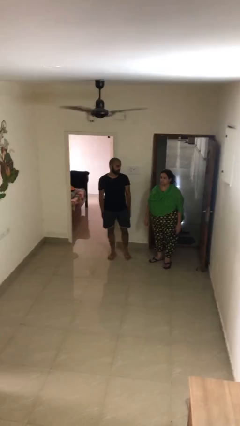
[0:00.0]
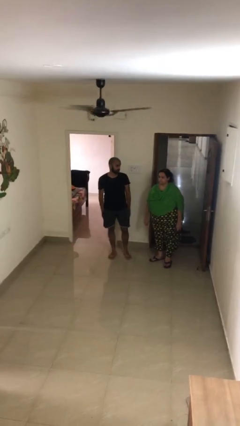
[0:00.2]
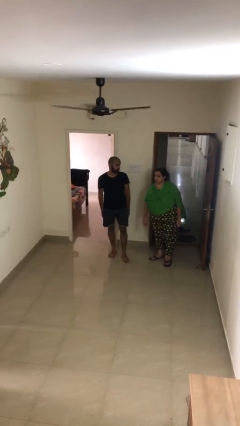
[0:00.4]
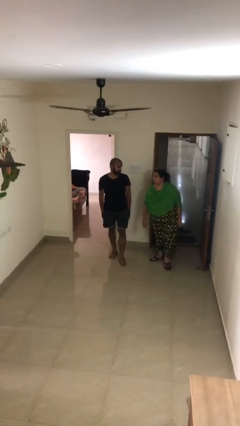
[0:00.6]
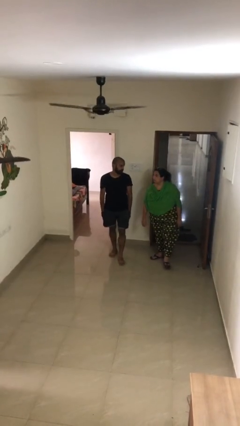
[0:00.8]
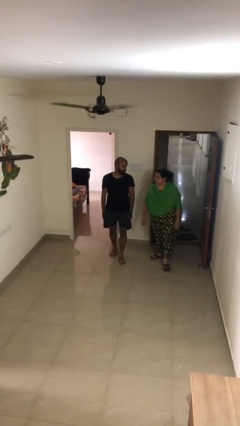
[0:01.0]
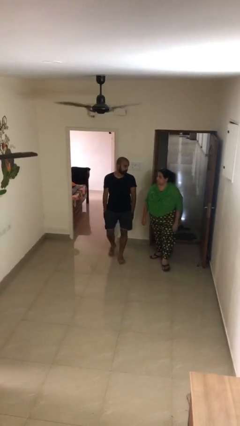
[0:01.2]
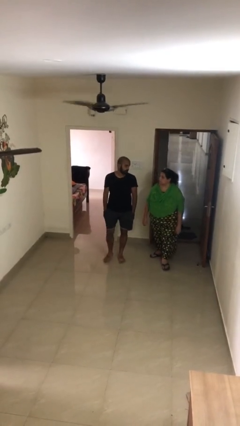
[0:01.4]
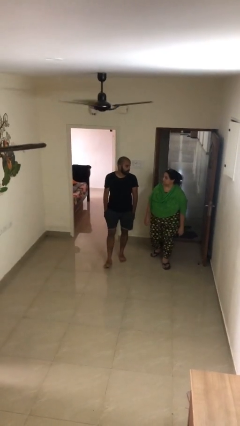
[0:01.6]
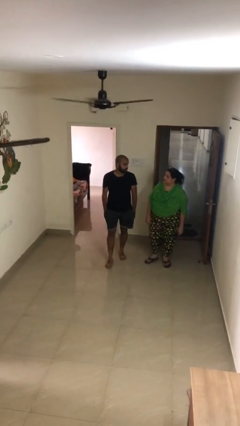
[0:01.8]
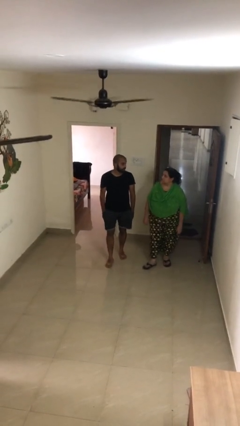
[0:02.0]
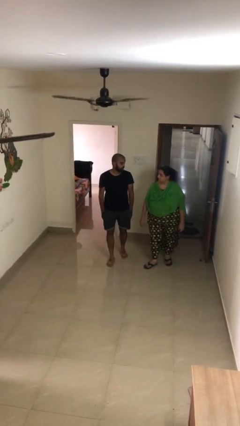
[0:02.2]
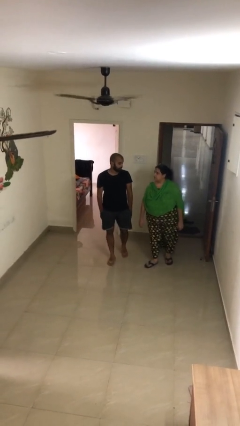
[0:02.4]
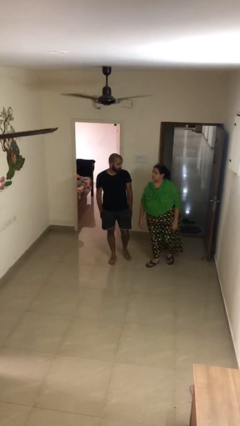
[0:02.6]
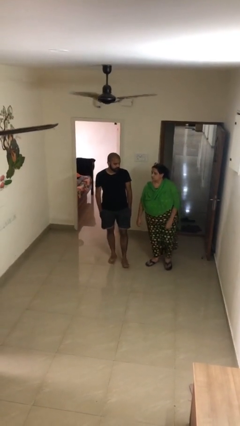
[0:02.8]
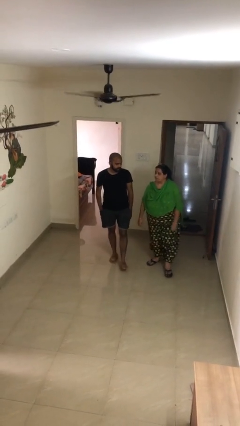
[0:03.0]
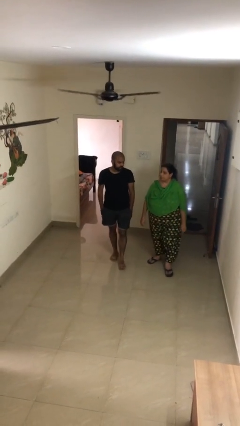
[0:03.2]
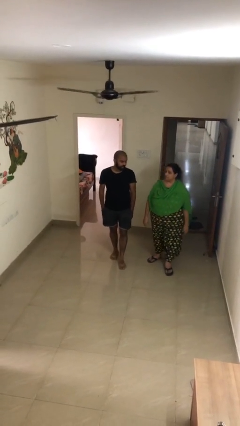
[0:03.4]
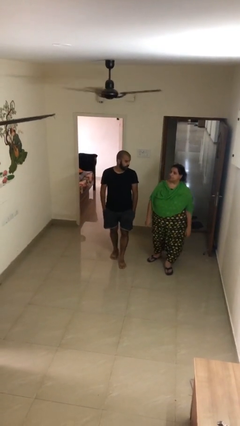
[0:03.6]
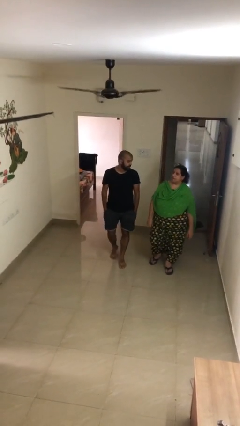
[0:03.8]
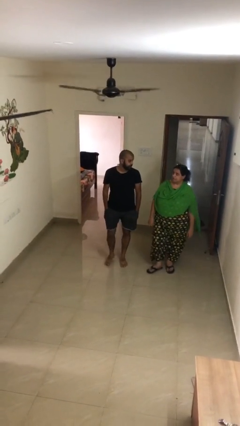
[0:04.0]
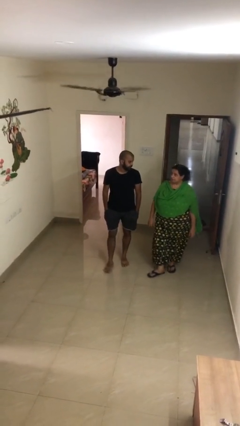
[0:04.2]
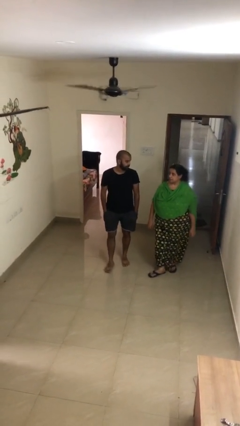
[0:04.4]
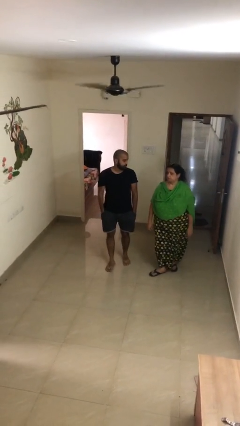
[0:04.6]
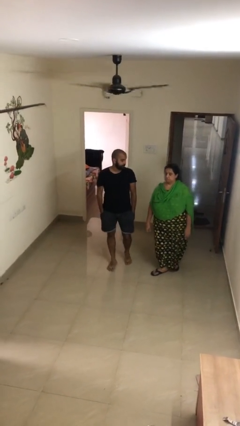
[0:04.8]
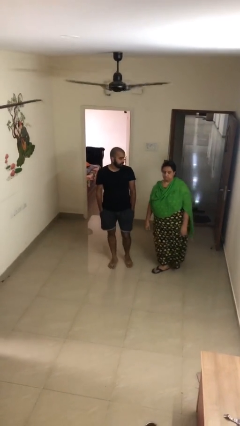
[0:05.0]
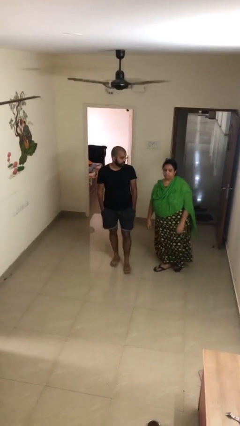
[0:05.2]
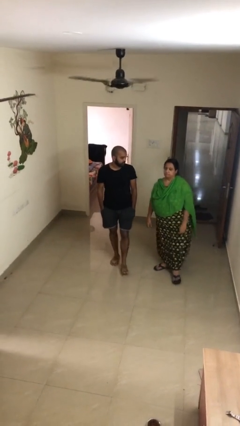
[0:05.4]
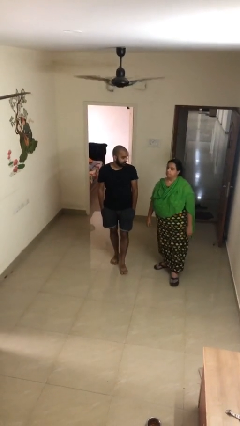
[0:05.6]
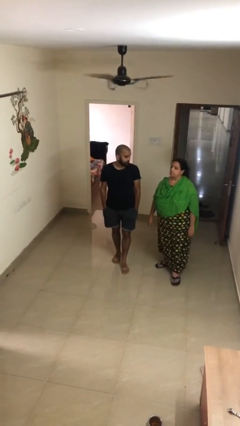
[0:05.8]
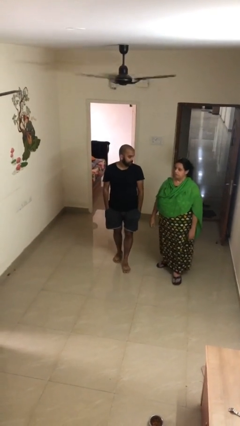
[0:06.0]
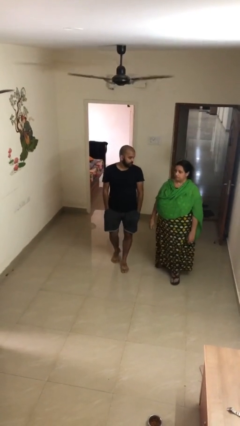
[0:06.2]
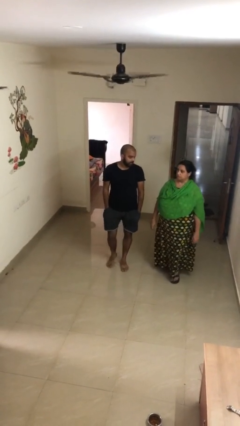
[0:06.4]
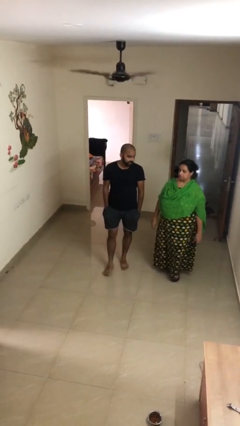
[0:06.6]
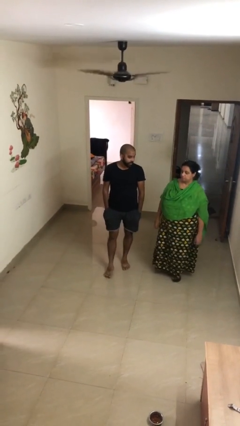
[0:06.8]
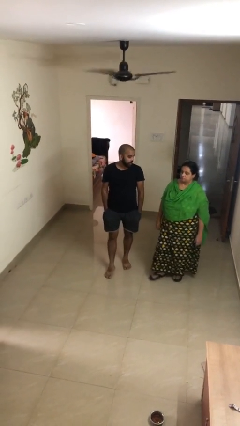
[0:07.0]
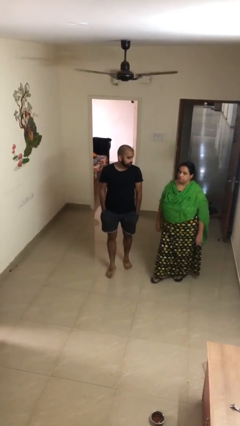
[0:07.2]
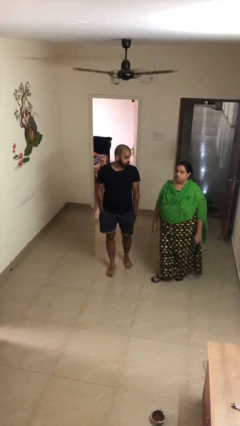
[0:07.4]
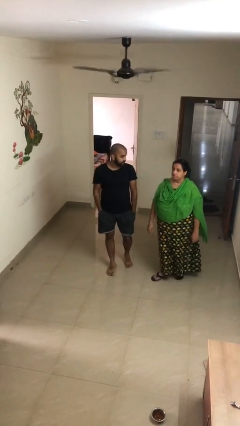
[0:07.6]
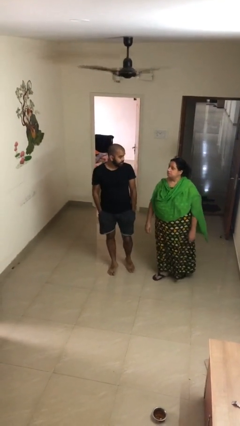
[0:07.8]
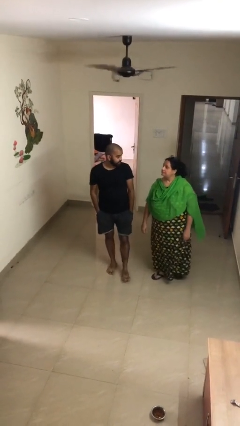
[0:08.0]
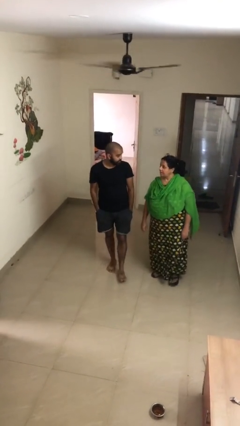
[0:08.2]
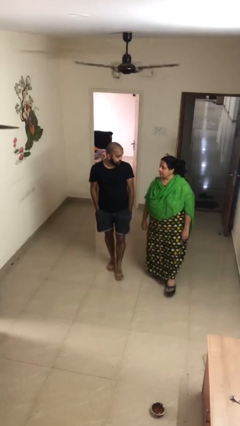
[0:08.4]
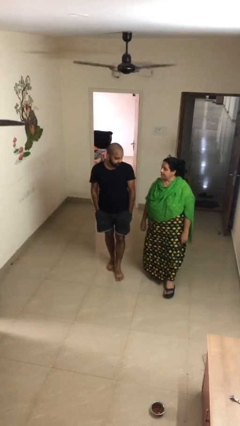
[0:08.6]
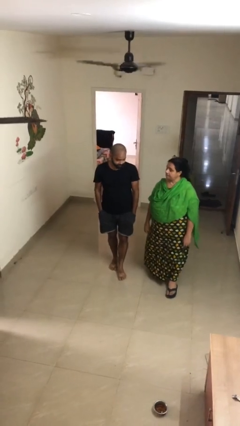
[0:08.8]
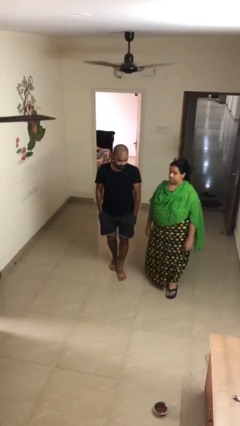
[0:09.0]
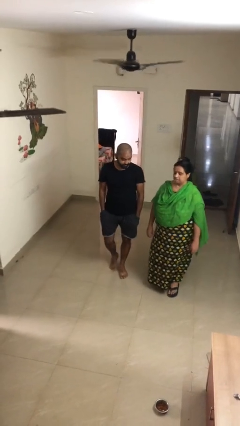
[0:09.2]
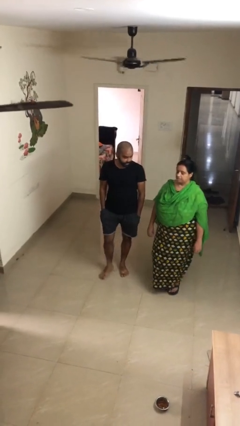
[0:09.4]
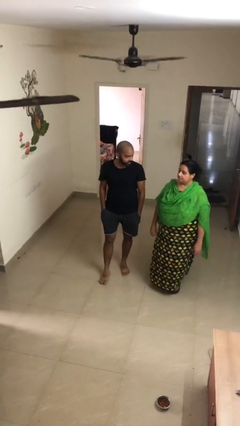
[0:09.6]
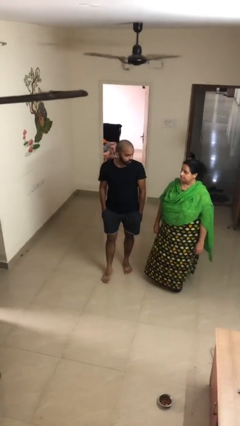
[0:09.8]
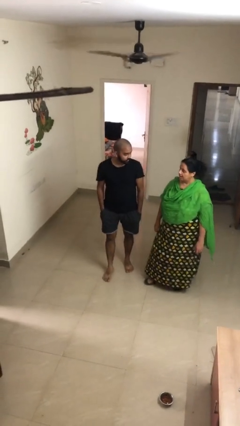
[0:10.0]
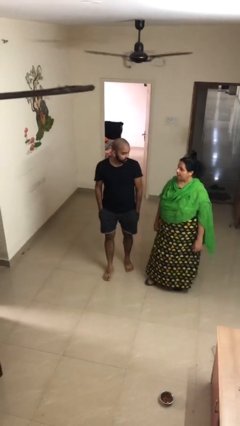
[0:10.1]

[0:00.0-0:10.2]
person talks to person

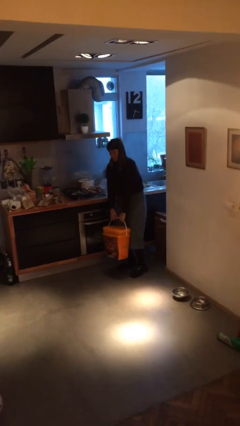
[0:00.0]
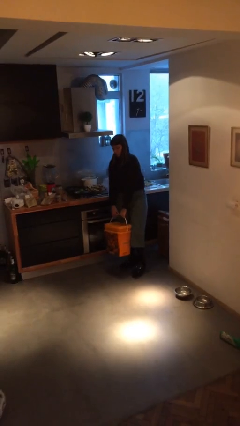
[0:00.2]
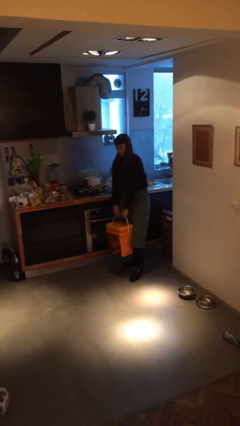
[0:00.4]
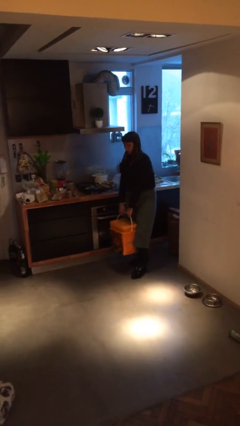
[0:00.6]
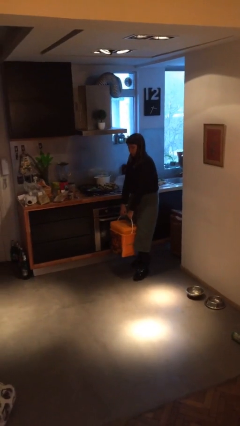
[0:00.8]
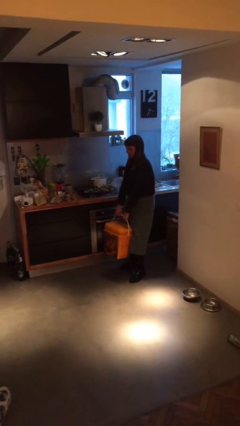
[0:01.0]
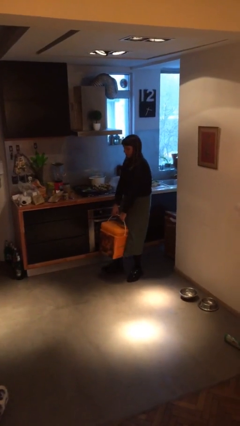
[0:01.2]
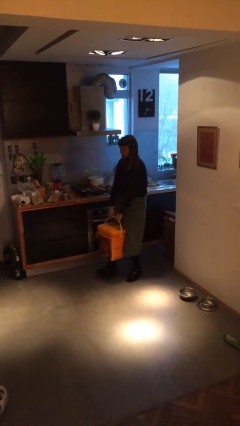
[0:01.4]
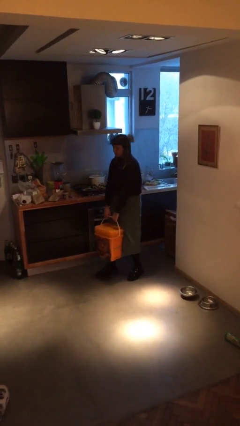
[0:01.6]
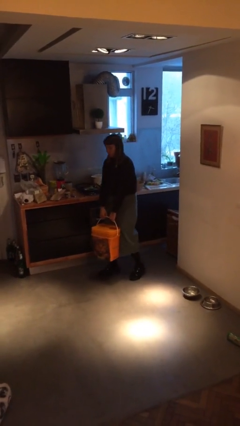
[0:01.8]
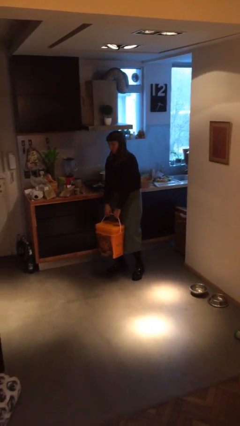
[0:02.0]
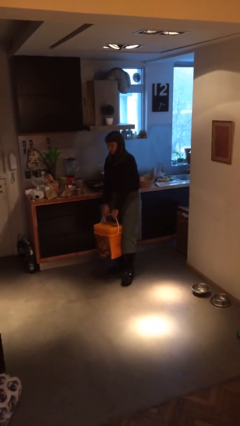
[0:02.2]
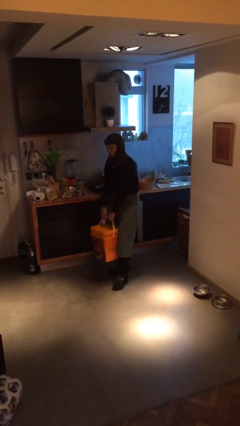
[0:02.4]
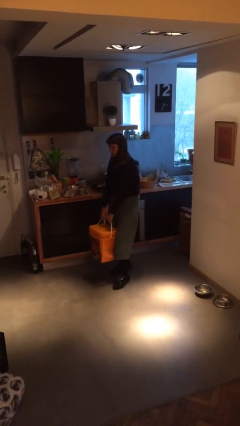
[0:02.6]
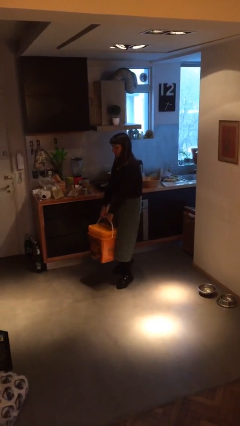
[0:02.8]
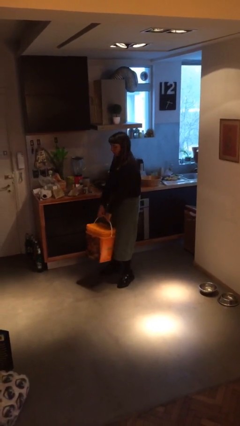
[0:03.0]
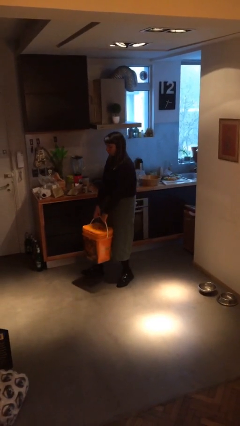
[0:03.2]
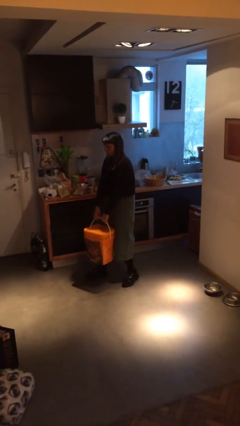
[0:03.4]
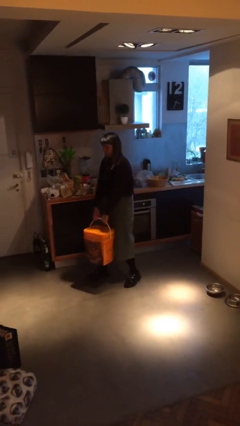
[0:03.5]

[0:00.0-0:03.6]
person carries heavy object

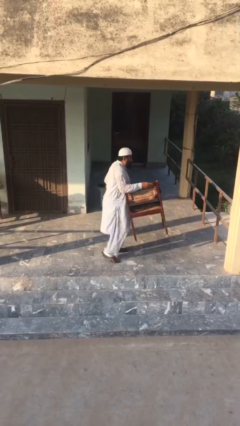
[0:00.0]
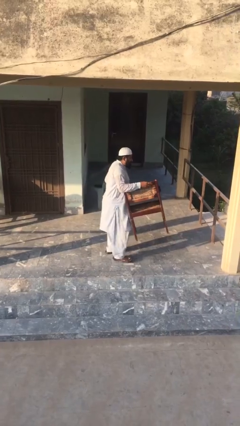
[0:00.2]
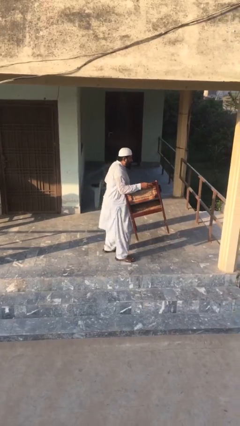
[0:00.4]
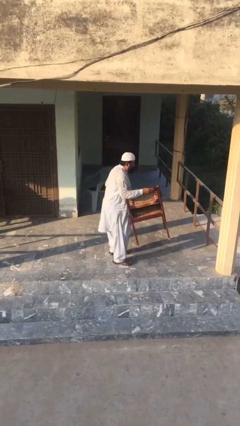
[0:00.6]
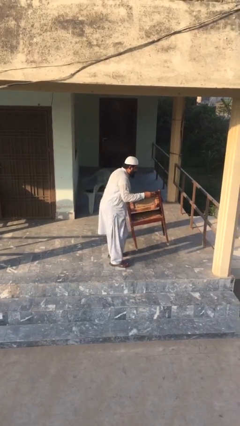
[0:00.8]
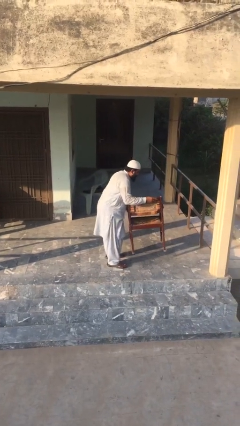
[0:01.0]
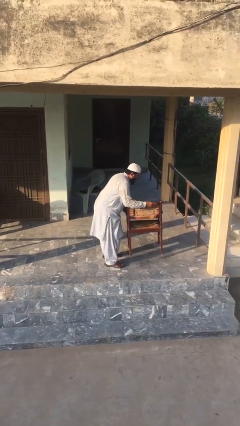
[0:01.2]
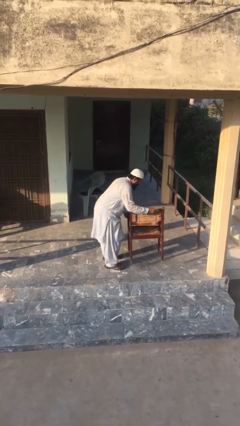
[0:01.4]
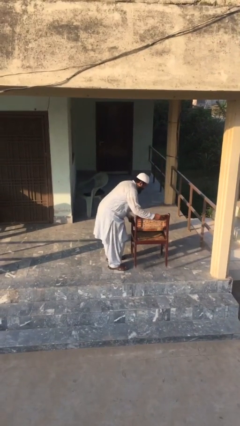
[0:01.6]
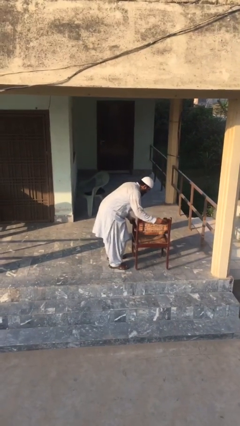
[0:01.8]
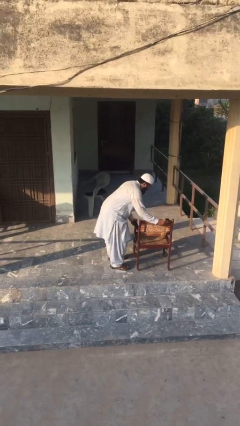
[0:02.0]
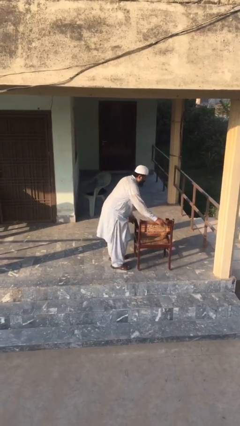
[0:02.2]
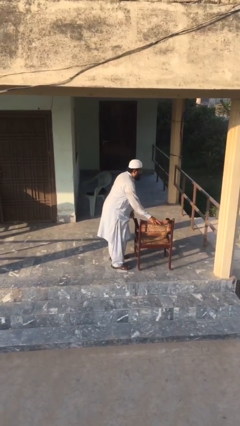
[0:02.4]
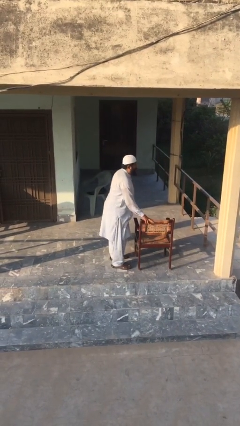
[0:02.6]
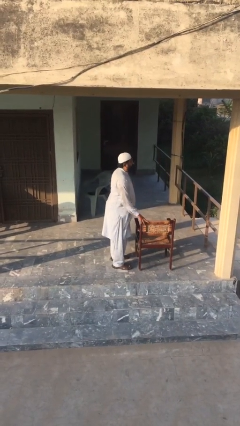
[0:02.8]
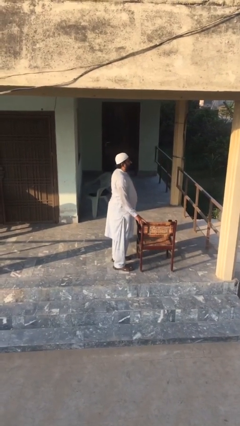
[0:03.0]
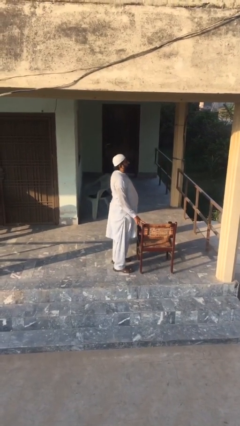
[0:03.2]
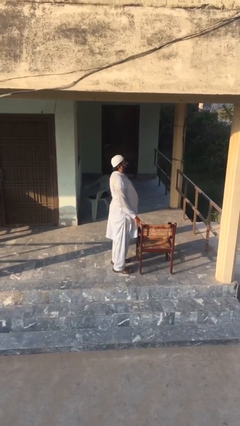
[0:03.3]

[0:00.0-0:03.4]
person puts down object on floor

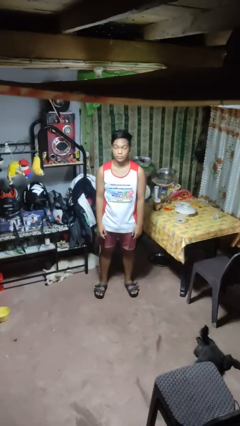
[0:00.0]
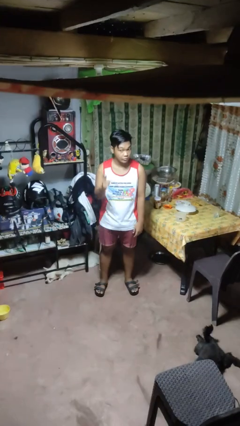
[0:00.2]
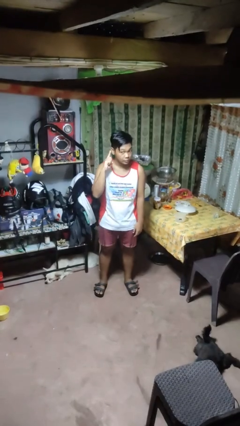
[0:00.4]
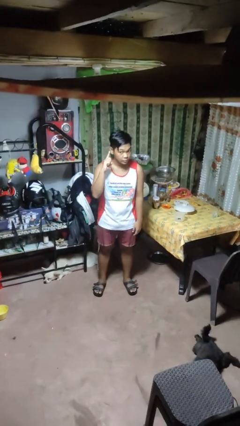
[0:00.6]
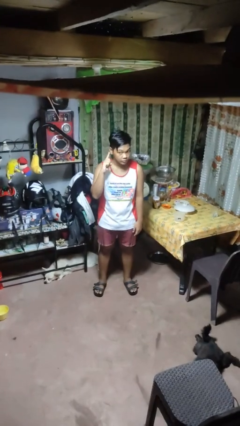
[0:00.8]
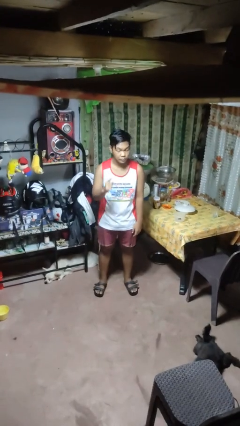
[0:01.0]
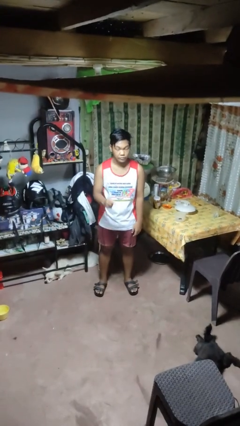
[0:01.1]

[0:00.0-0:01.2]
person gestures listen closely
